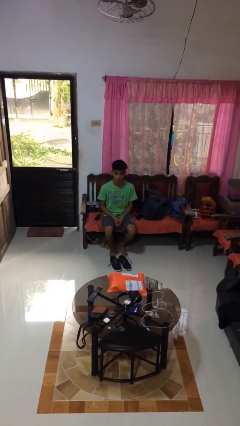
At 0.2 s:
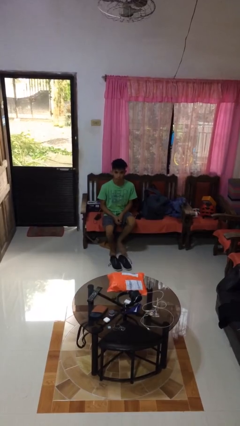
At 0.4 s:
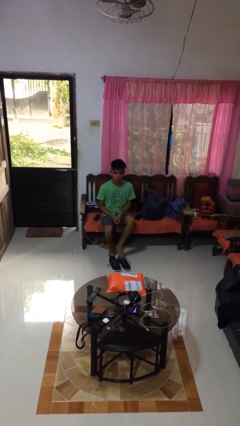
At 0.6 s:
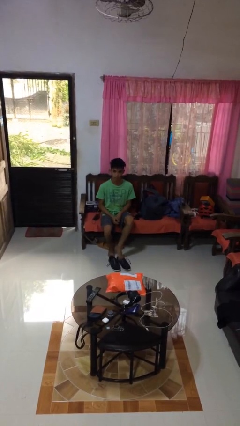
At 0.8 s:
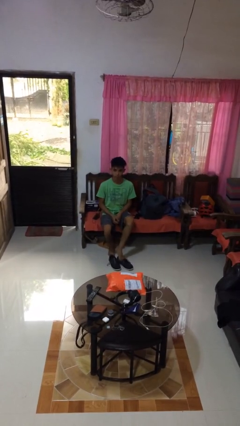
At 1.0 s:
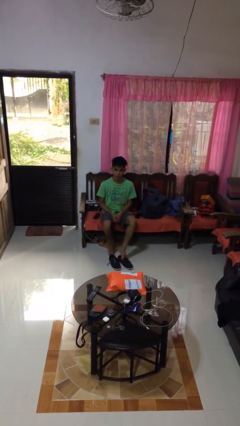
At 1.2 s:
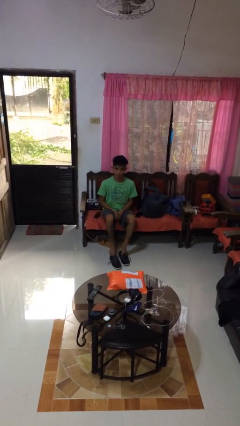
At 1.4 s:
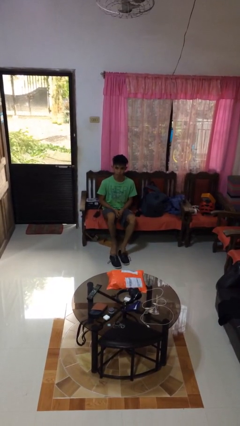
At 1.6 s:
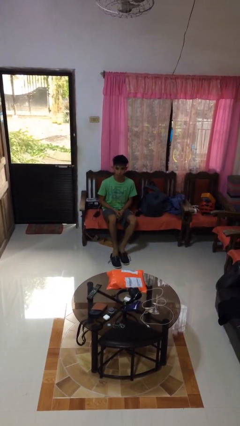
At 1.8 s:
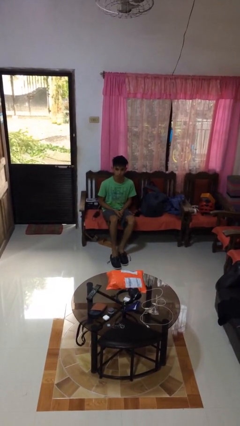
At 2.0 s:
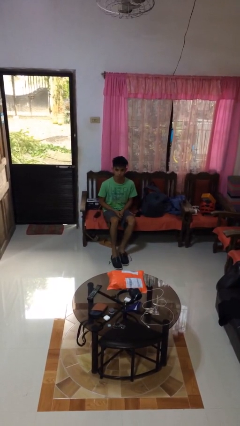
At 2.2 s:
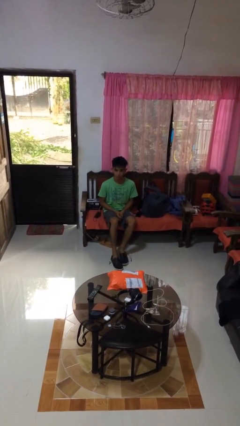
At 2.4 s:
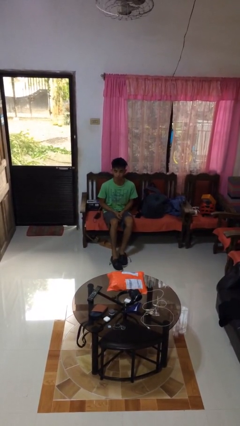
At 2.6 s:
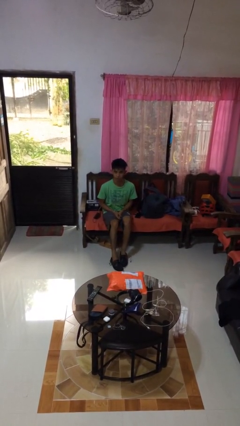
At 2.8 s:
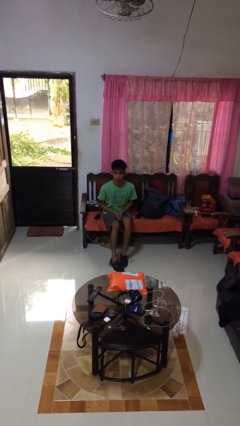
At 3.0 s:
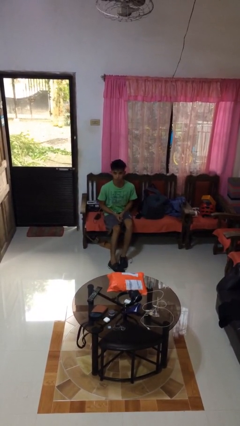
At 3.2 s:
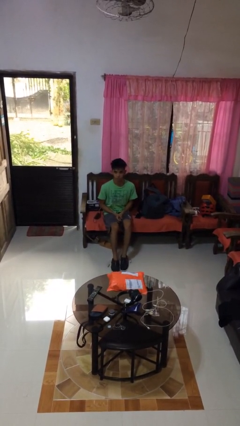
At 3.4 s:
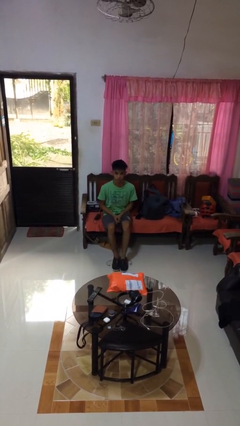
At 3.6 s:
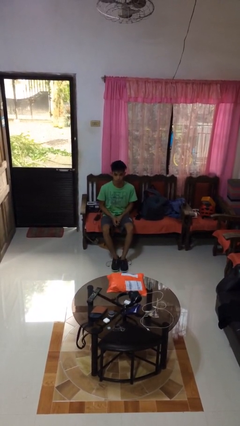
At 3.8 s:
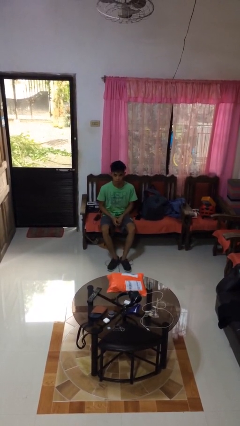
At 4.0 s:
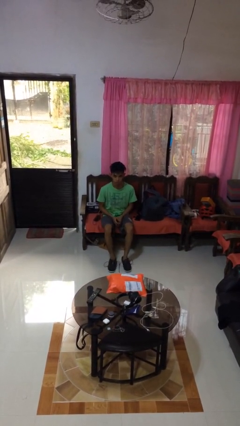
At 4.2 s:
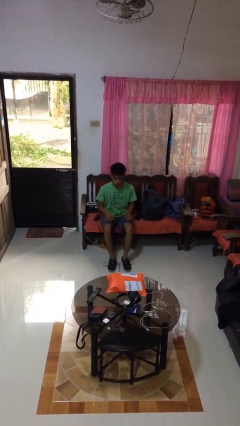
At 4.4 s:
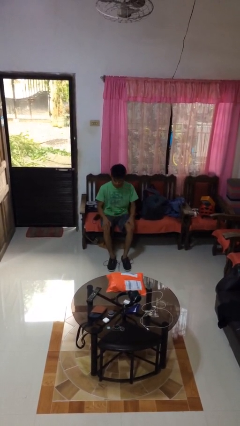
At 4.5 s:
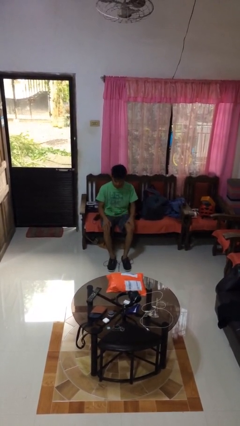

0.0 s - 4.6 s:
person puts on shoes

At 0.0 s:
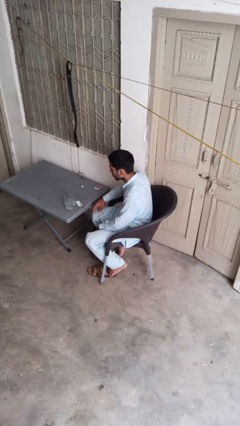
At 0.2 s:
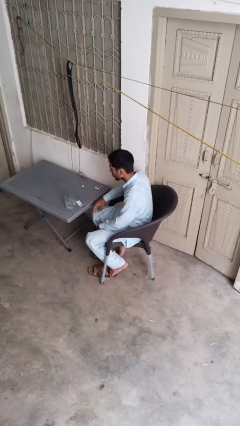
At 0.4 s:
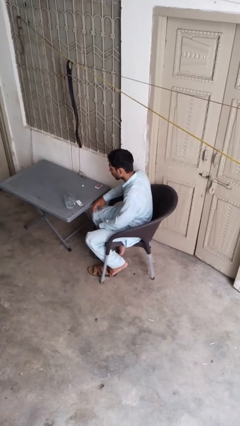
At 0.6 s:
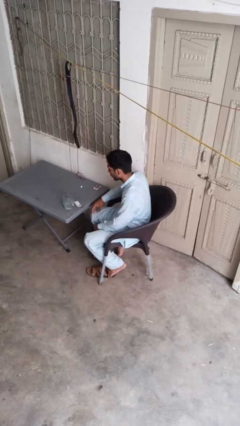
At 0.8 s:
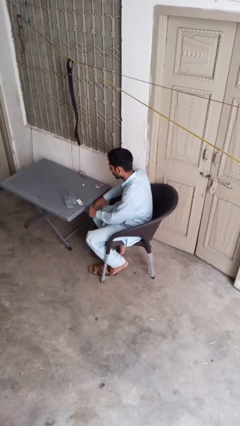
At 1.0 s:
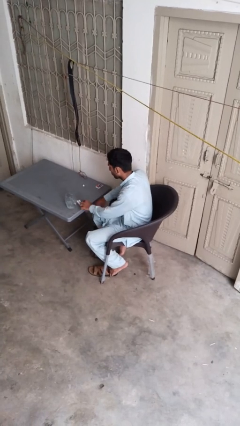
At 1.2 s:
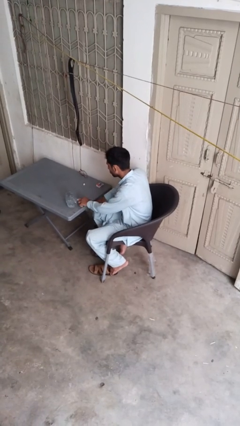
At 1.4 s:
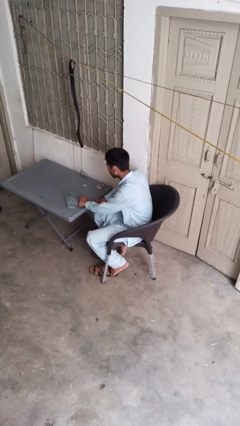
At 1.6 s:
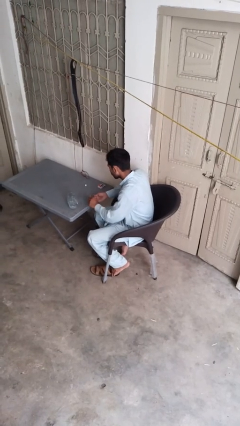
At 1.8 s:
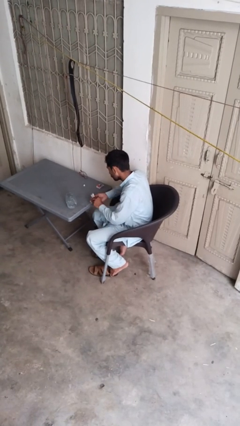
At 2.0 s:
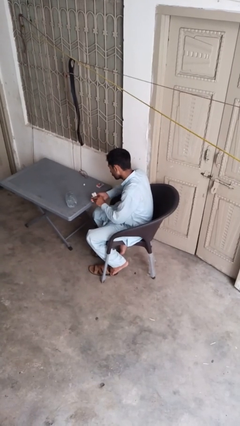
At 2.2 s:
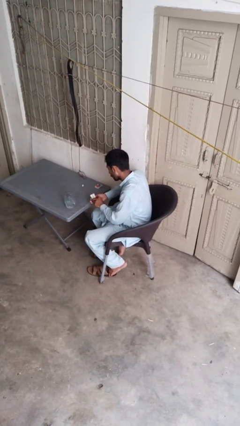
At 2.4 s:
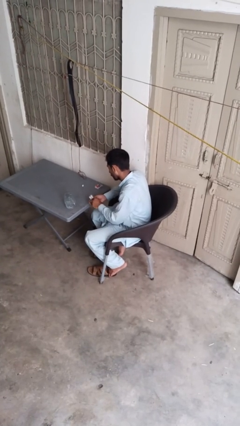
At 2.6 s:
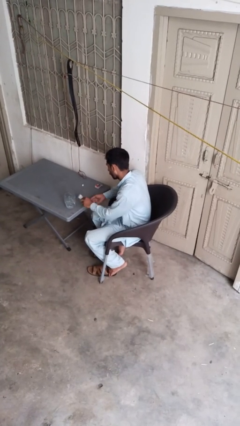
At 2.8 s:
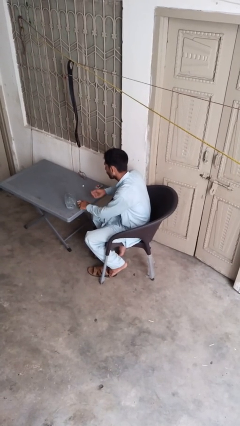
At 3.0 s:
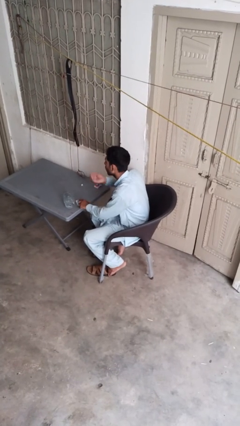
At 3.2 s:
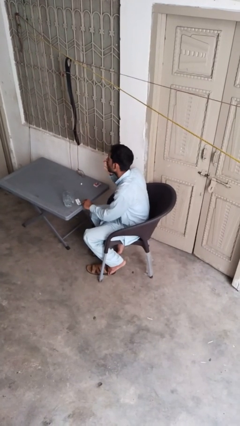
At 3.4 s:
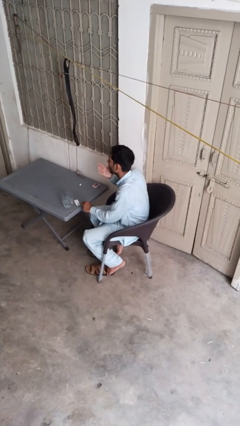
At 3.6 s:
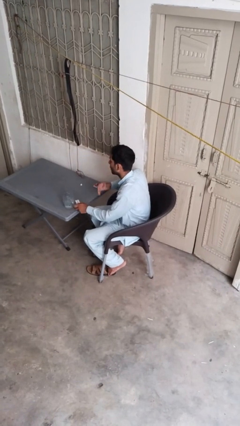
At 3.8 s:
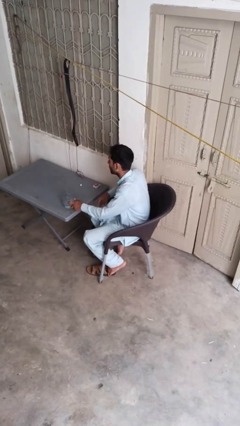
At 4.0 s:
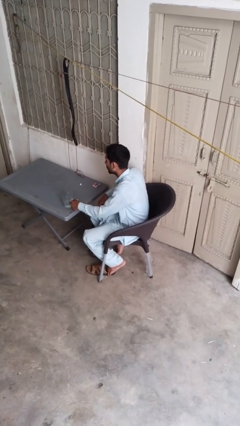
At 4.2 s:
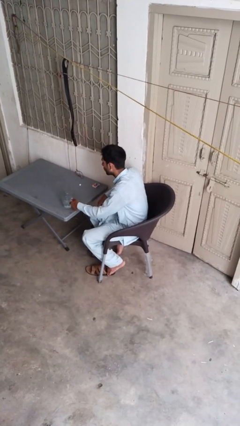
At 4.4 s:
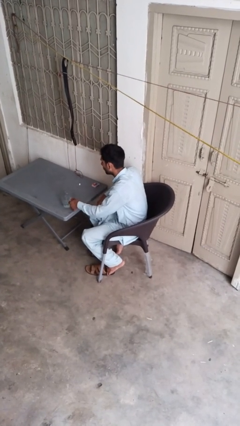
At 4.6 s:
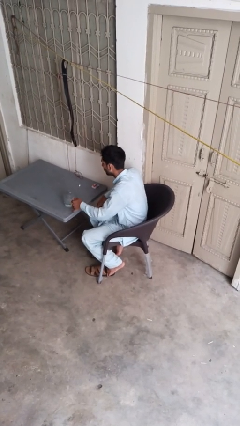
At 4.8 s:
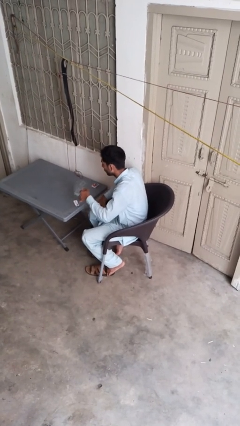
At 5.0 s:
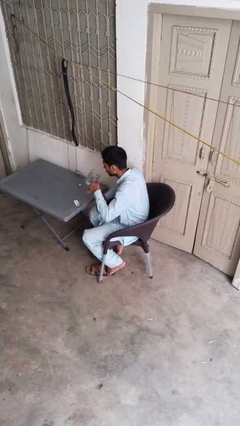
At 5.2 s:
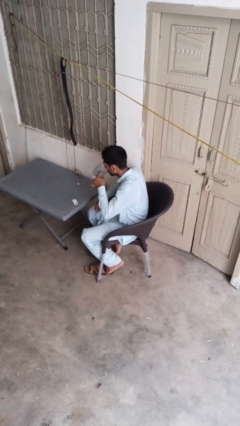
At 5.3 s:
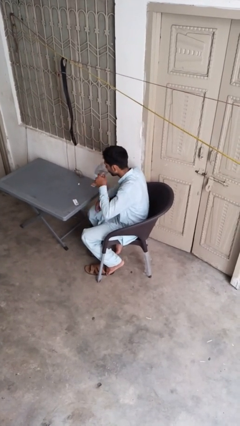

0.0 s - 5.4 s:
person takes medicine pills

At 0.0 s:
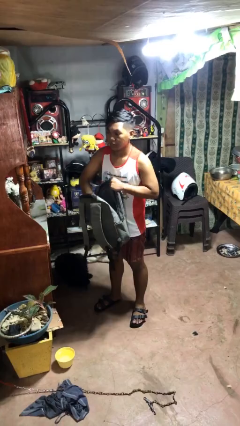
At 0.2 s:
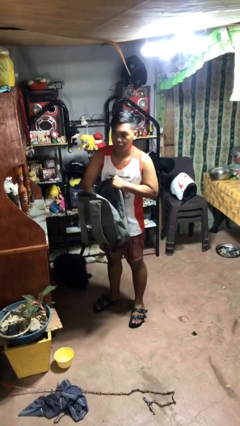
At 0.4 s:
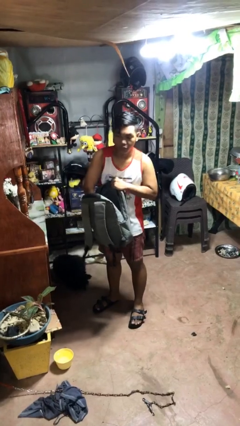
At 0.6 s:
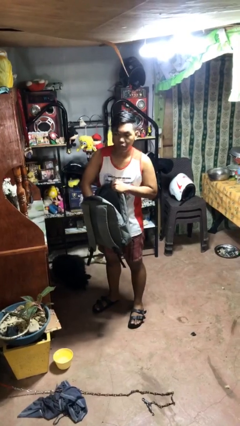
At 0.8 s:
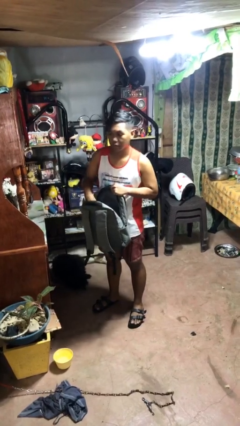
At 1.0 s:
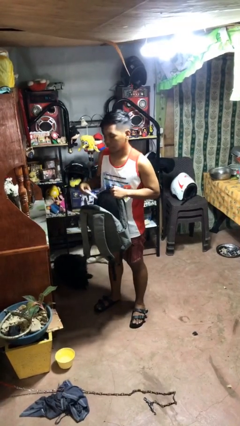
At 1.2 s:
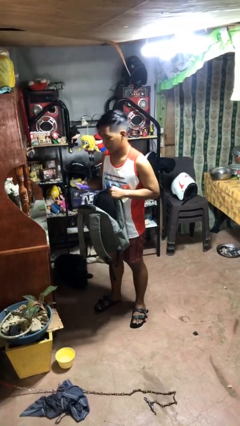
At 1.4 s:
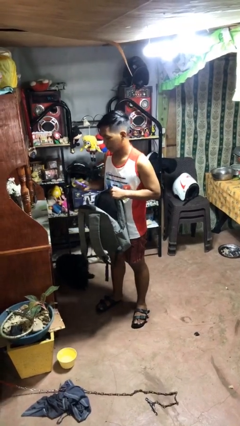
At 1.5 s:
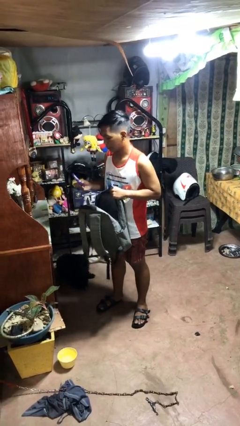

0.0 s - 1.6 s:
person takes object from bag

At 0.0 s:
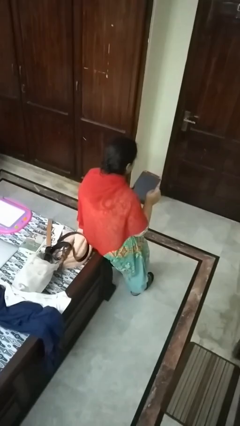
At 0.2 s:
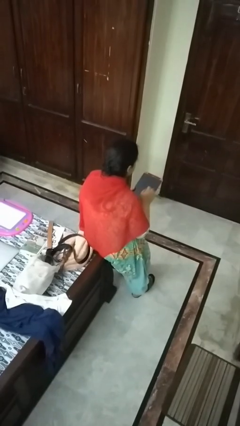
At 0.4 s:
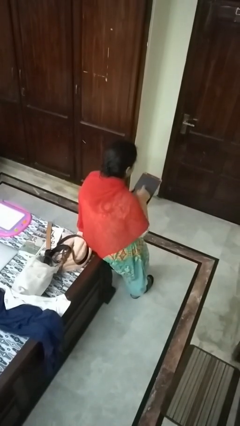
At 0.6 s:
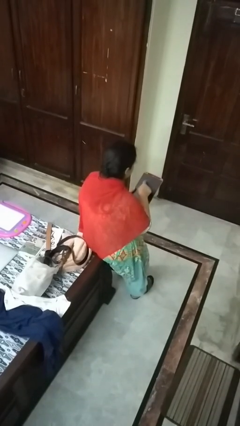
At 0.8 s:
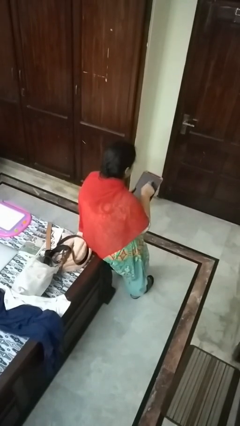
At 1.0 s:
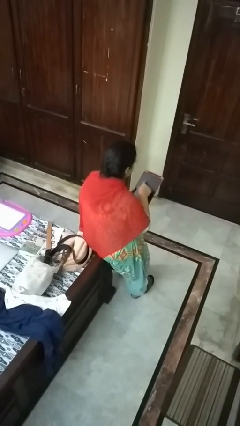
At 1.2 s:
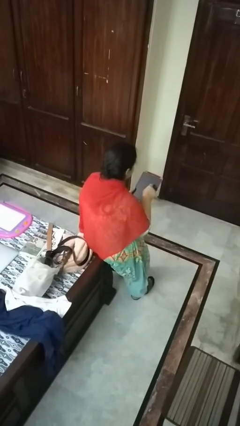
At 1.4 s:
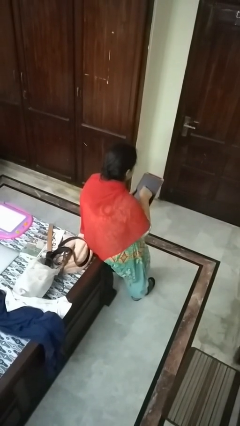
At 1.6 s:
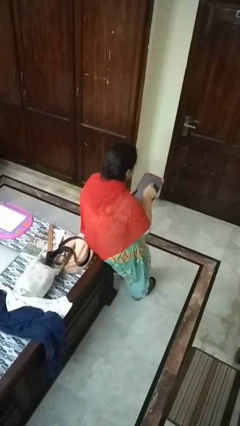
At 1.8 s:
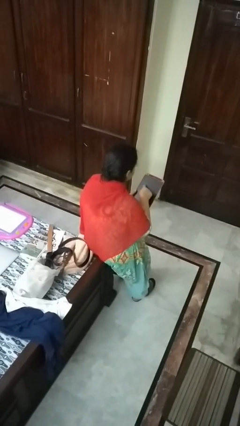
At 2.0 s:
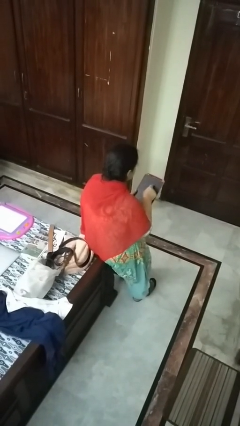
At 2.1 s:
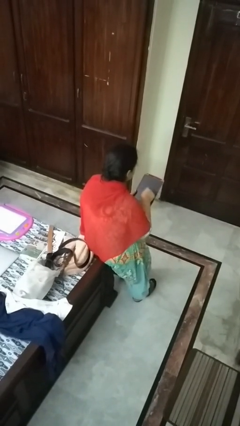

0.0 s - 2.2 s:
person interacts with tablet

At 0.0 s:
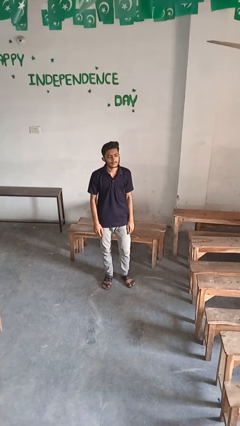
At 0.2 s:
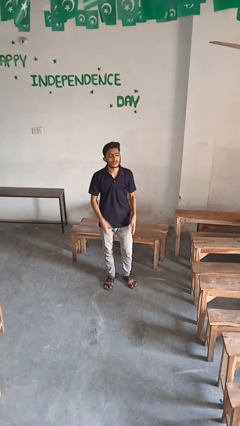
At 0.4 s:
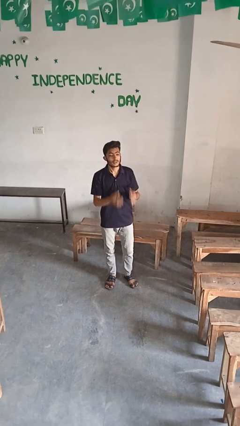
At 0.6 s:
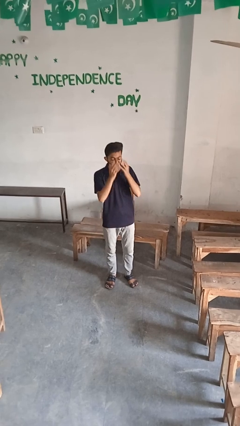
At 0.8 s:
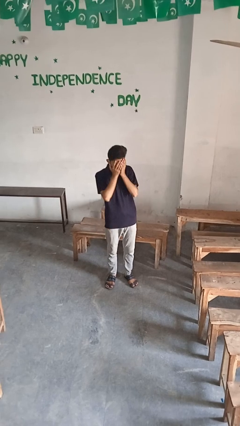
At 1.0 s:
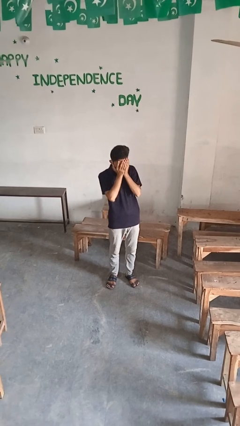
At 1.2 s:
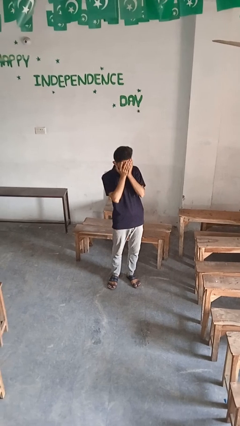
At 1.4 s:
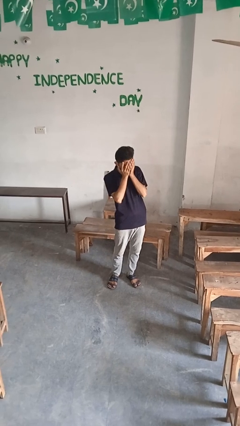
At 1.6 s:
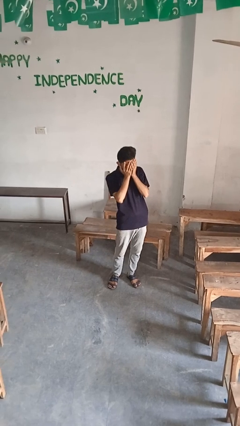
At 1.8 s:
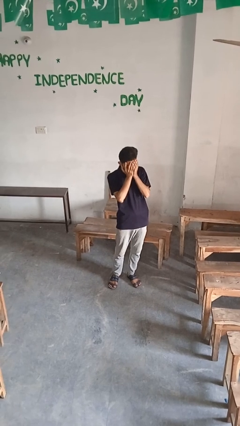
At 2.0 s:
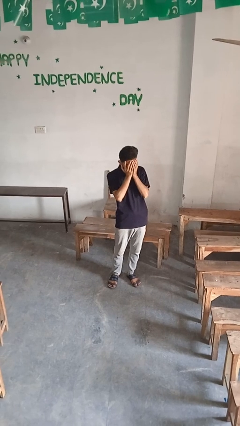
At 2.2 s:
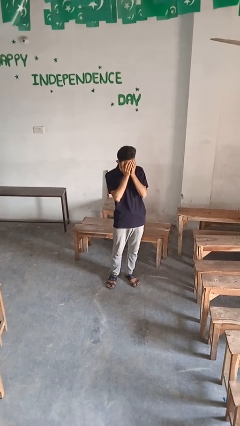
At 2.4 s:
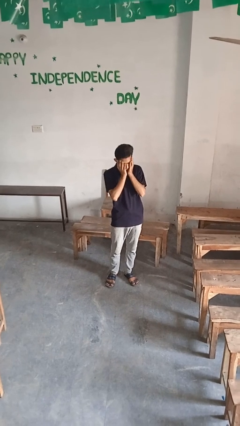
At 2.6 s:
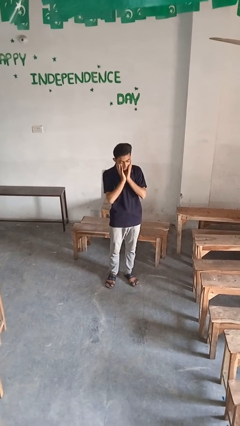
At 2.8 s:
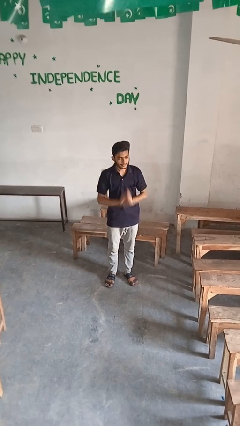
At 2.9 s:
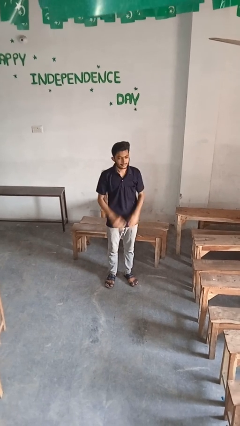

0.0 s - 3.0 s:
person covers face with hands

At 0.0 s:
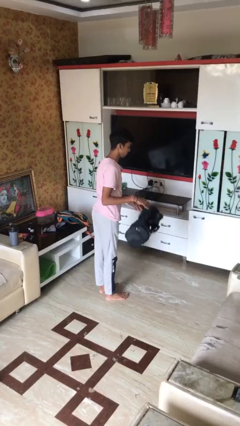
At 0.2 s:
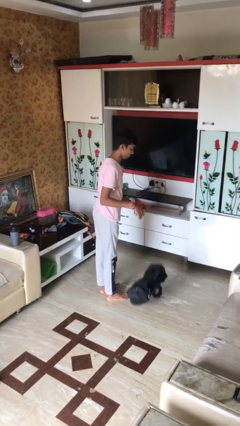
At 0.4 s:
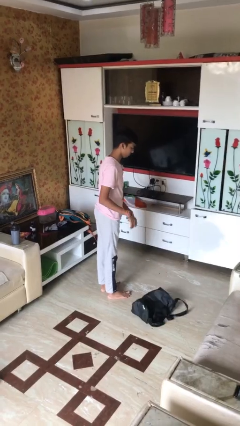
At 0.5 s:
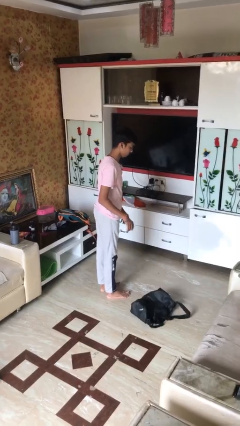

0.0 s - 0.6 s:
person drops object
